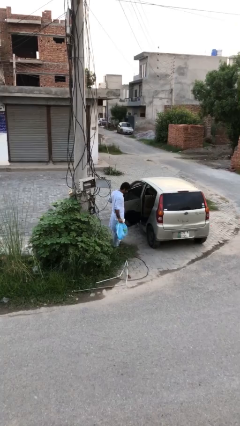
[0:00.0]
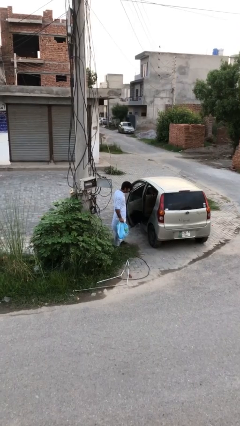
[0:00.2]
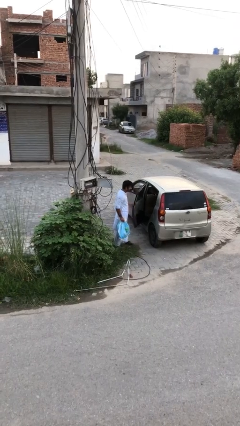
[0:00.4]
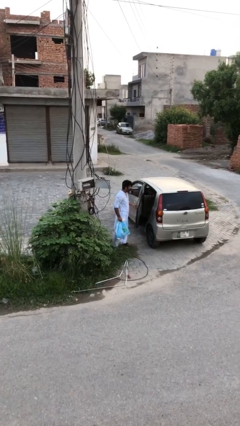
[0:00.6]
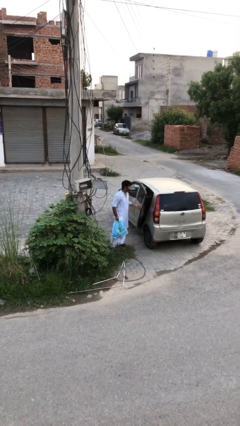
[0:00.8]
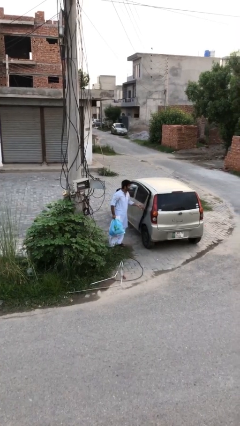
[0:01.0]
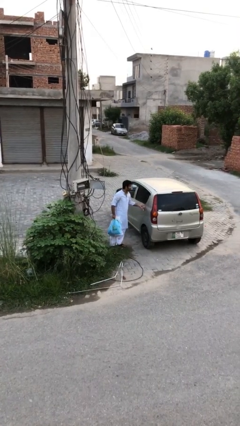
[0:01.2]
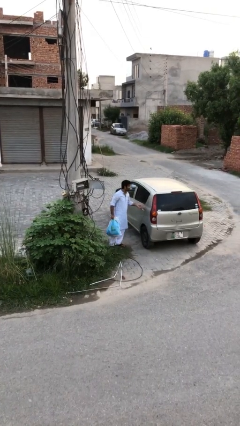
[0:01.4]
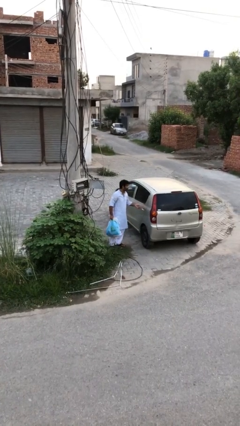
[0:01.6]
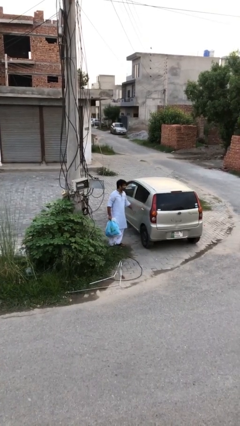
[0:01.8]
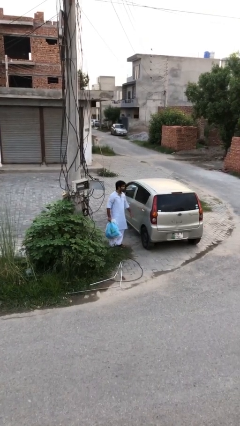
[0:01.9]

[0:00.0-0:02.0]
person closes car door

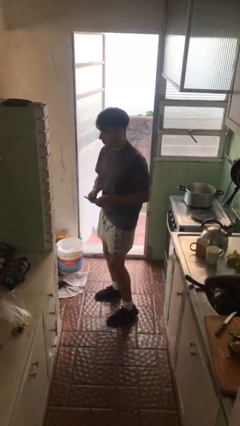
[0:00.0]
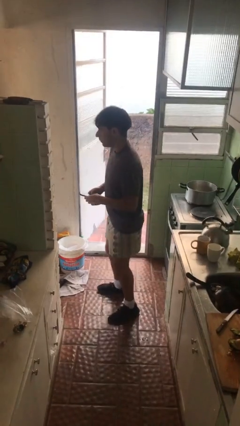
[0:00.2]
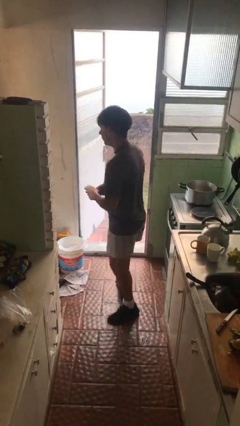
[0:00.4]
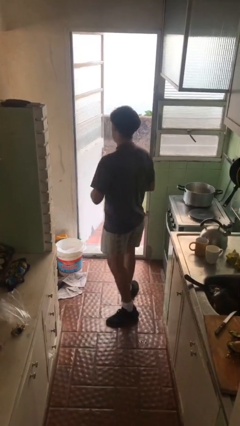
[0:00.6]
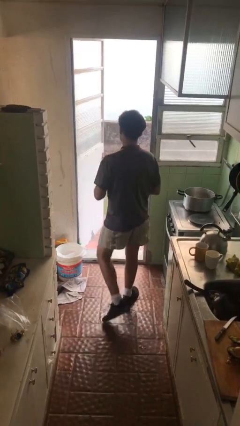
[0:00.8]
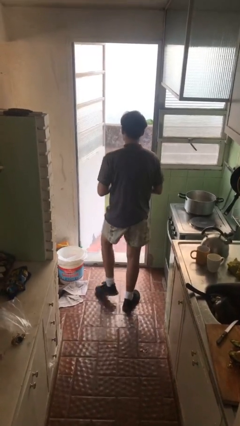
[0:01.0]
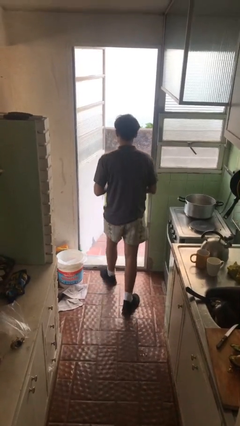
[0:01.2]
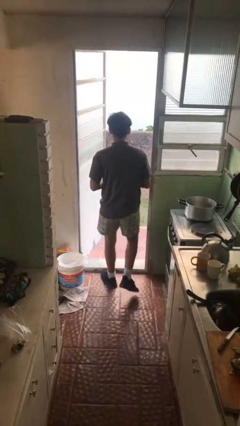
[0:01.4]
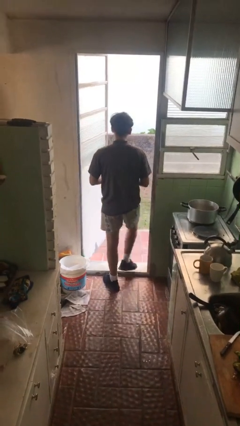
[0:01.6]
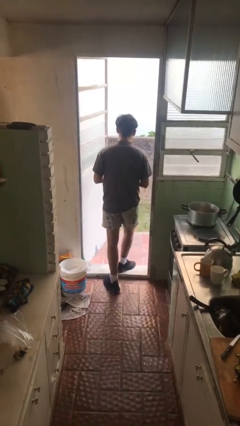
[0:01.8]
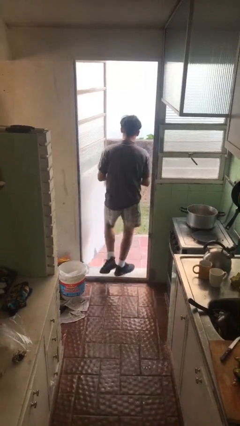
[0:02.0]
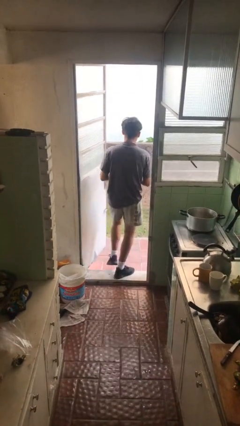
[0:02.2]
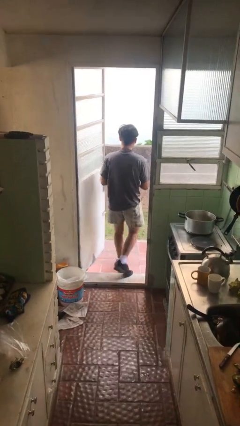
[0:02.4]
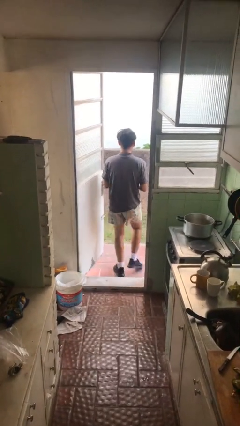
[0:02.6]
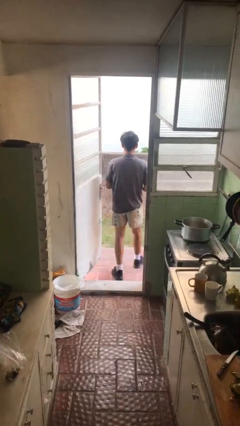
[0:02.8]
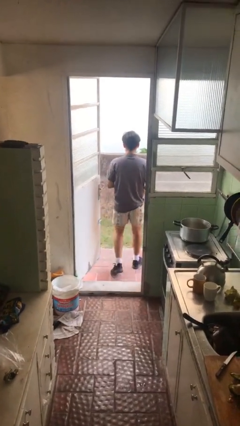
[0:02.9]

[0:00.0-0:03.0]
person exits scene through structure

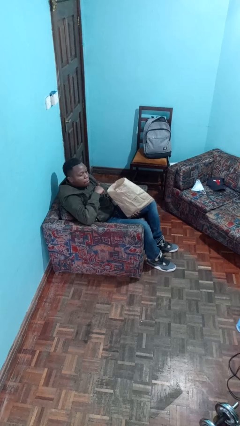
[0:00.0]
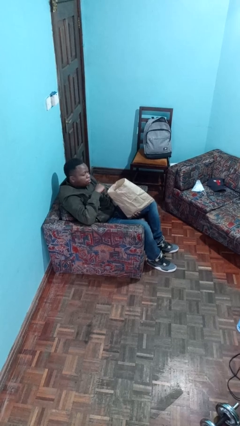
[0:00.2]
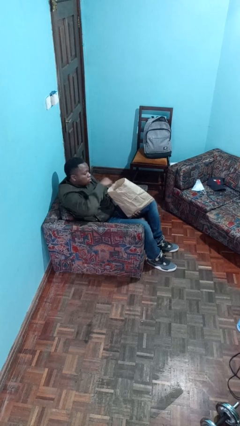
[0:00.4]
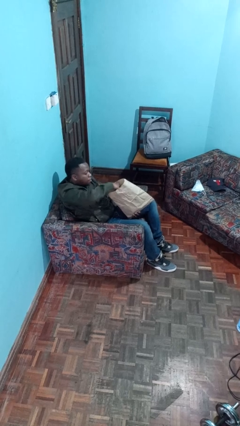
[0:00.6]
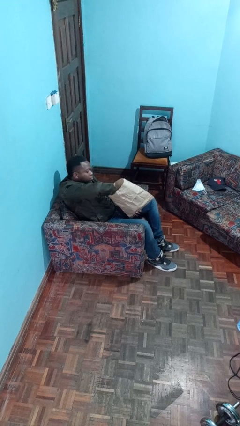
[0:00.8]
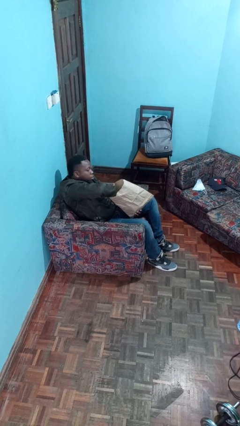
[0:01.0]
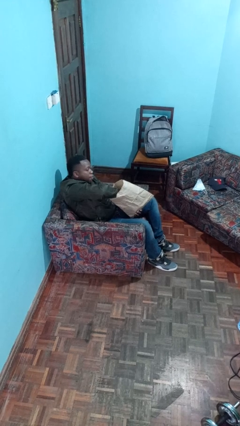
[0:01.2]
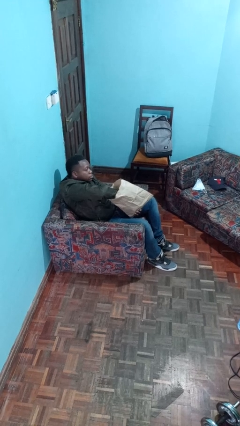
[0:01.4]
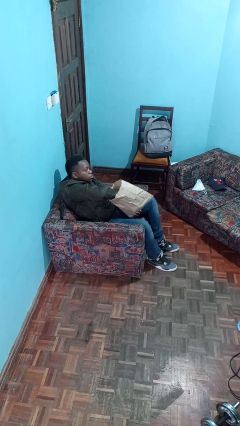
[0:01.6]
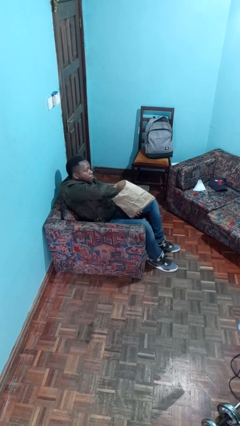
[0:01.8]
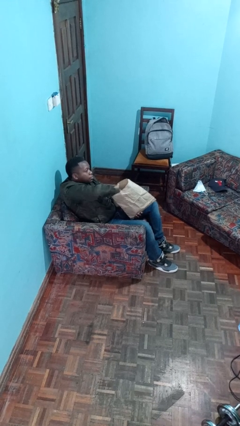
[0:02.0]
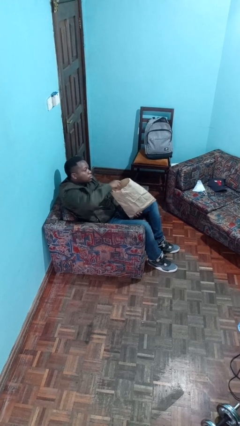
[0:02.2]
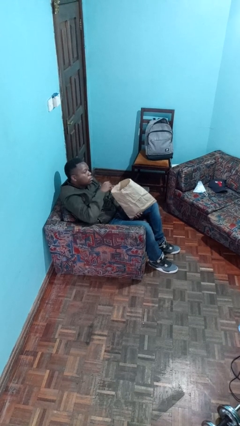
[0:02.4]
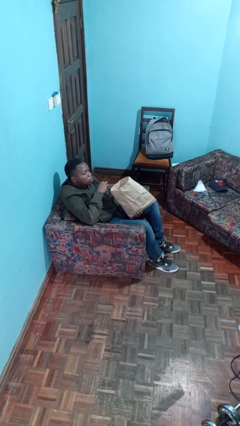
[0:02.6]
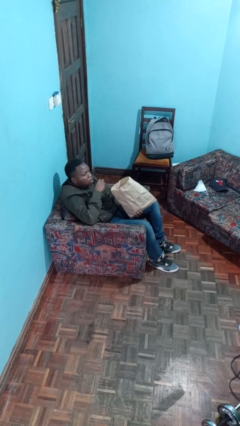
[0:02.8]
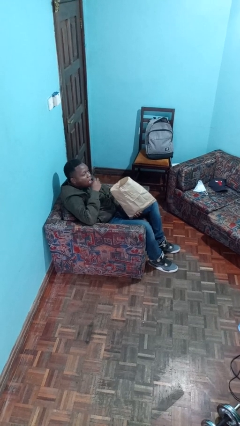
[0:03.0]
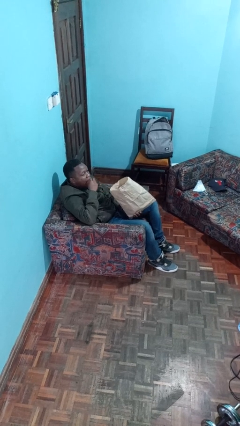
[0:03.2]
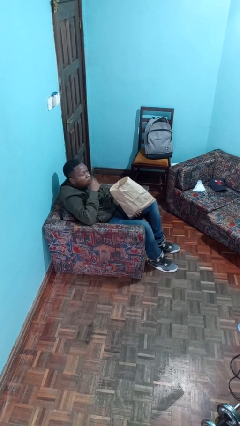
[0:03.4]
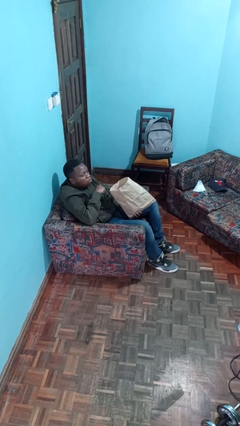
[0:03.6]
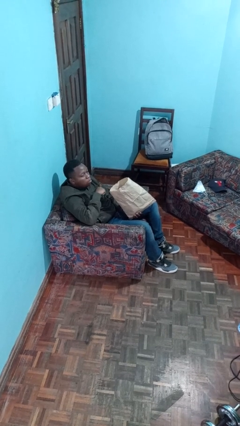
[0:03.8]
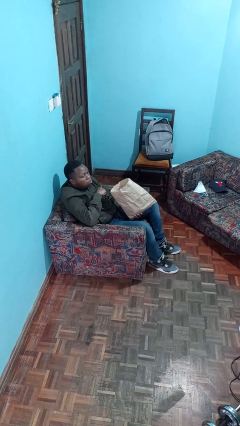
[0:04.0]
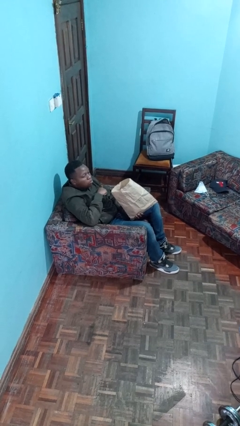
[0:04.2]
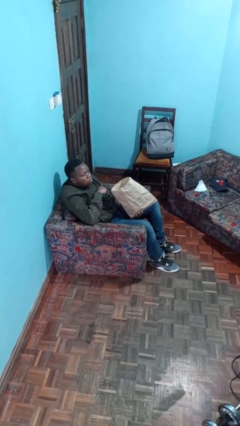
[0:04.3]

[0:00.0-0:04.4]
person eats snack from bag

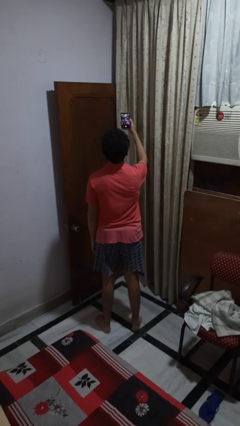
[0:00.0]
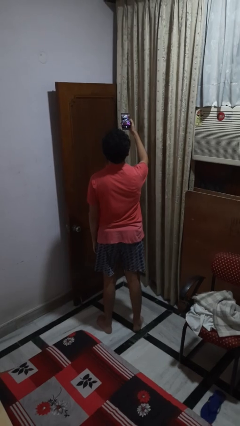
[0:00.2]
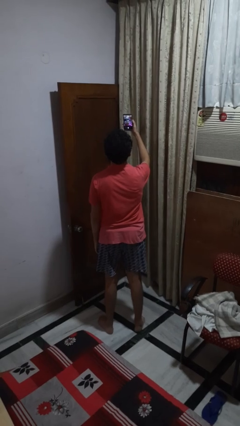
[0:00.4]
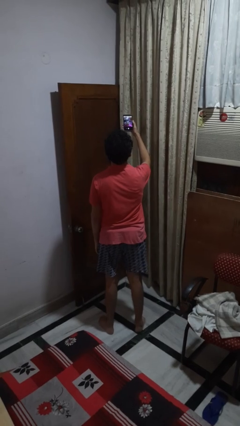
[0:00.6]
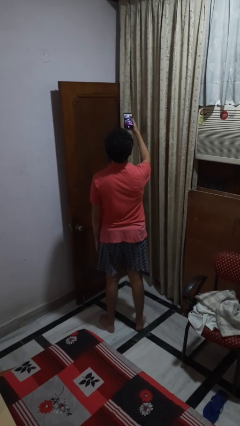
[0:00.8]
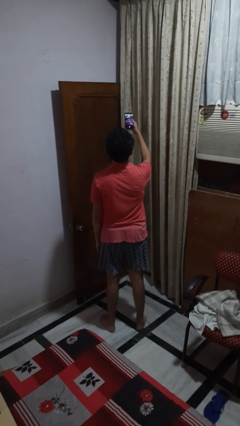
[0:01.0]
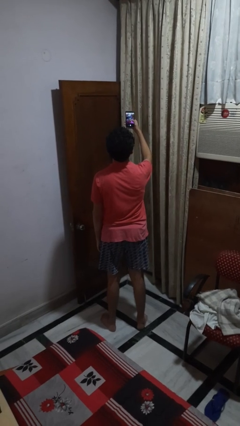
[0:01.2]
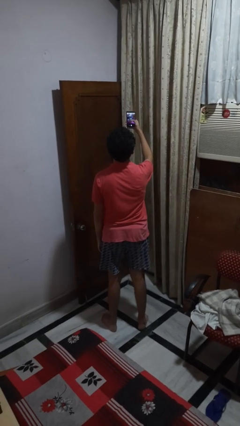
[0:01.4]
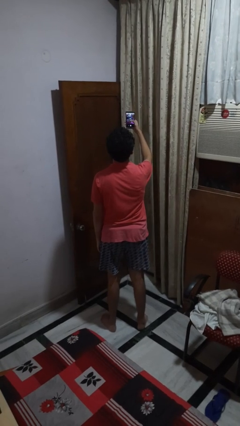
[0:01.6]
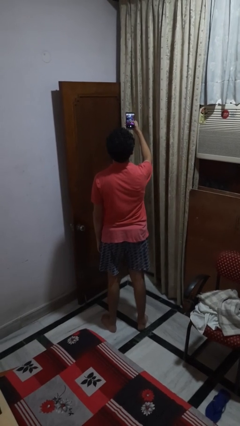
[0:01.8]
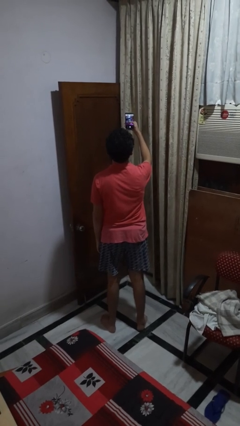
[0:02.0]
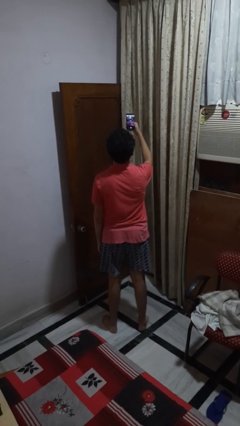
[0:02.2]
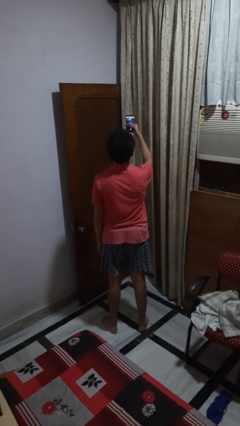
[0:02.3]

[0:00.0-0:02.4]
person takes selfie

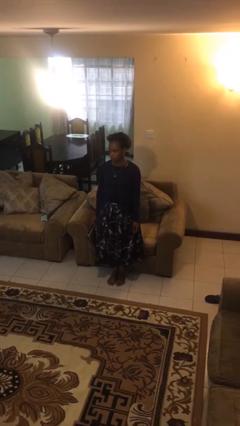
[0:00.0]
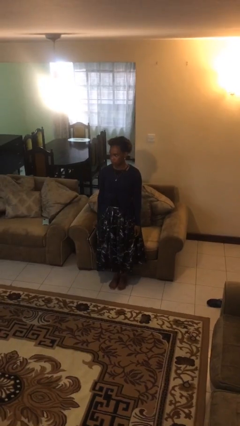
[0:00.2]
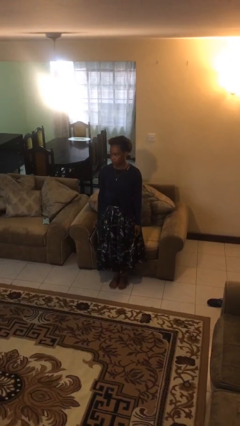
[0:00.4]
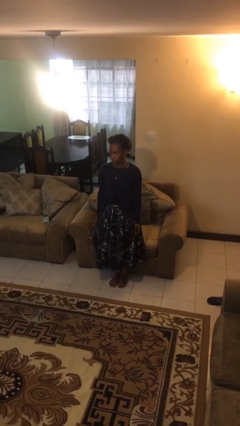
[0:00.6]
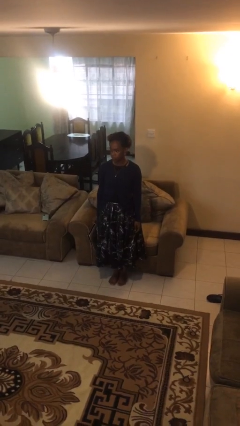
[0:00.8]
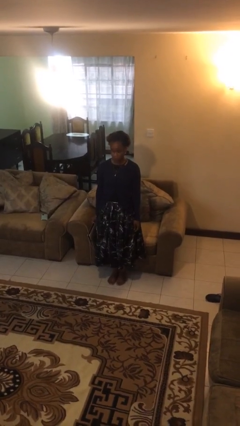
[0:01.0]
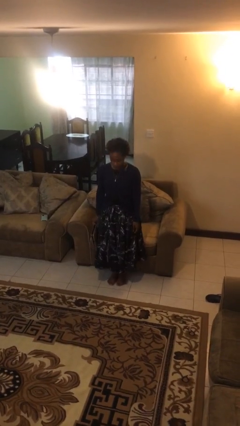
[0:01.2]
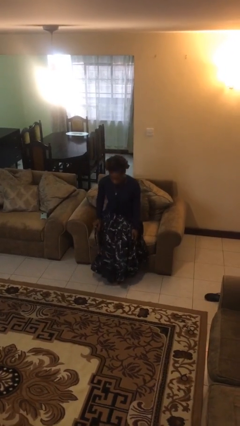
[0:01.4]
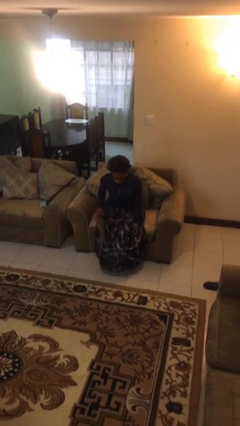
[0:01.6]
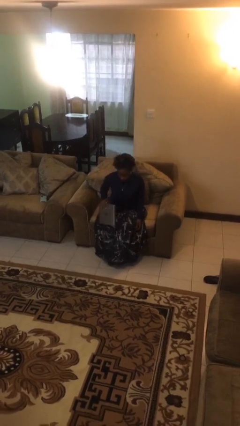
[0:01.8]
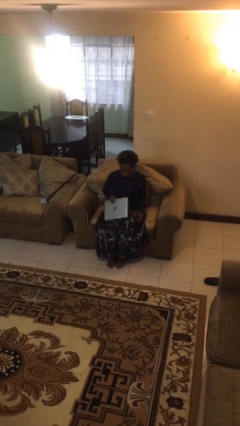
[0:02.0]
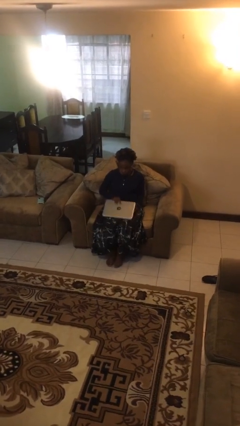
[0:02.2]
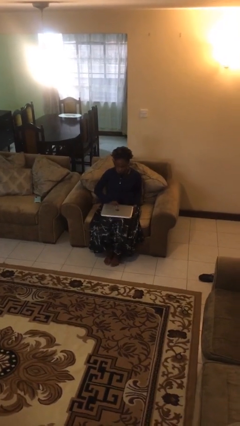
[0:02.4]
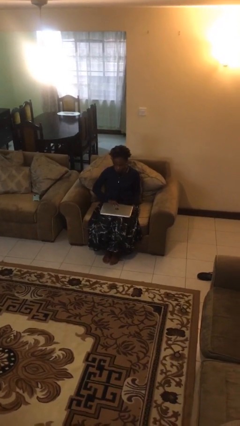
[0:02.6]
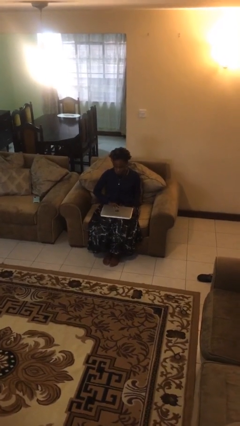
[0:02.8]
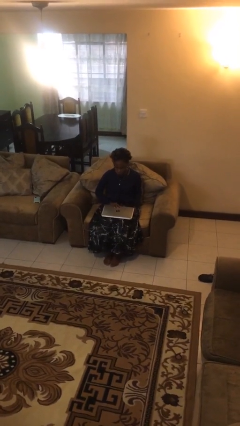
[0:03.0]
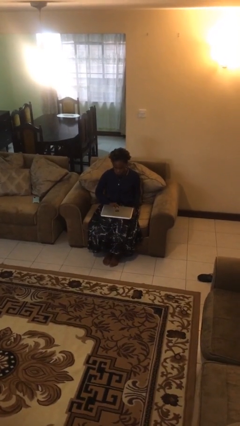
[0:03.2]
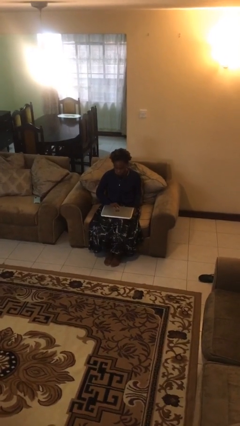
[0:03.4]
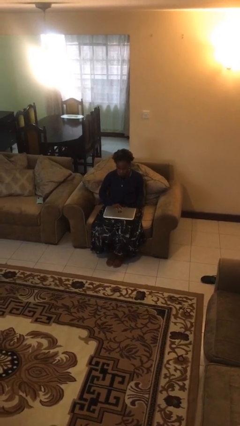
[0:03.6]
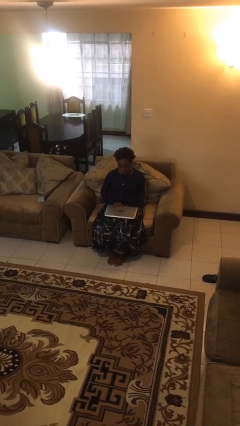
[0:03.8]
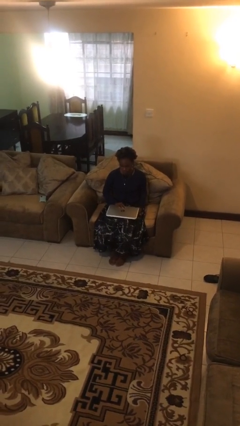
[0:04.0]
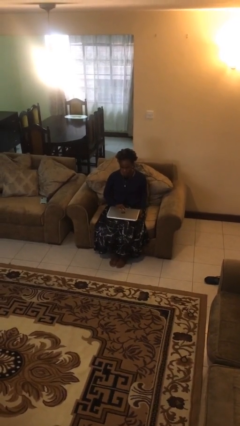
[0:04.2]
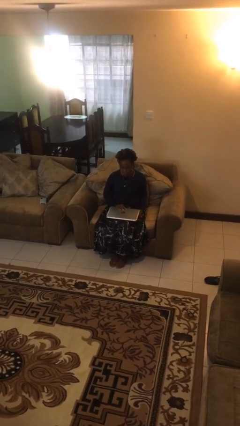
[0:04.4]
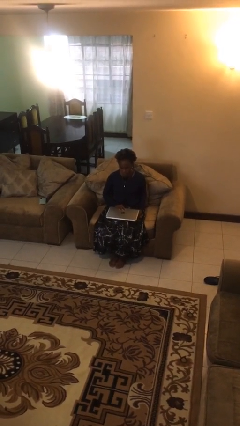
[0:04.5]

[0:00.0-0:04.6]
person sits down

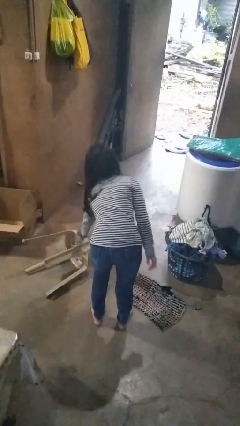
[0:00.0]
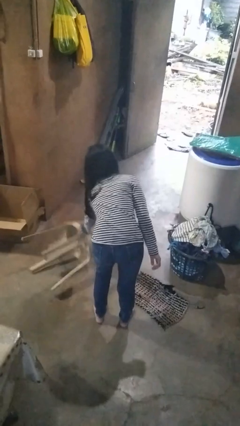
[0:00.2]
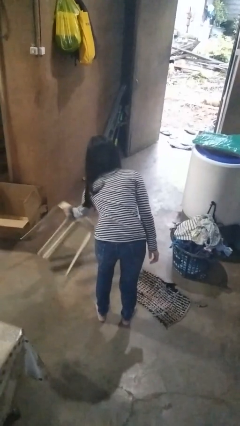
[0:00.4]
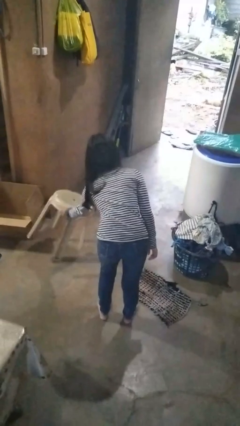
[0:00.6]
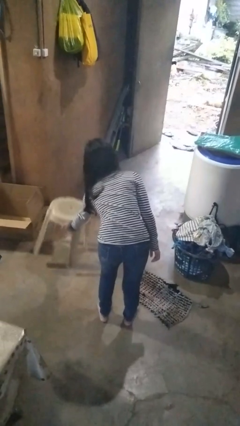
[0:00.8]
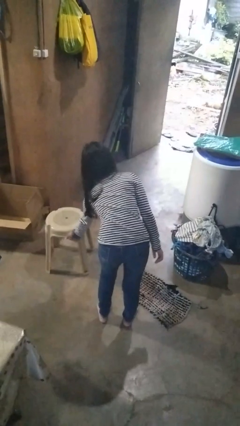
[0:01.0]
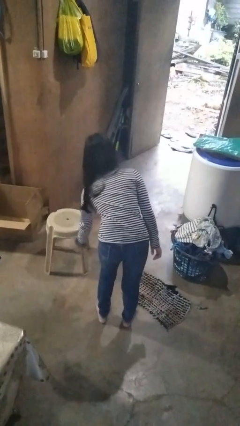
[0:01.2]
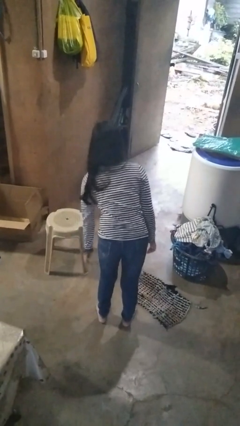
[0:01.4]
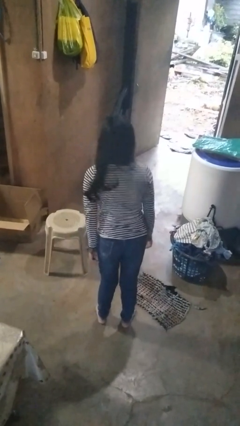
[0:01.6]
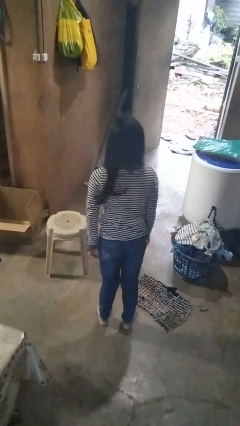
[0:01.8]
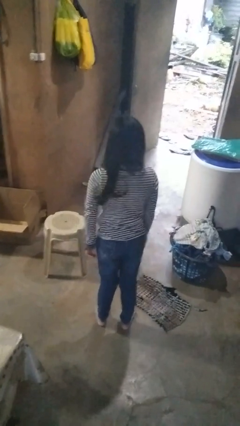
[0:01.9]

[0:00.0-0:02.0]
person sets upright furniture
